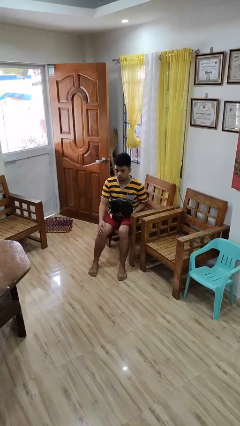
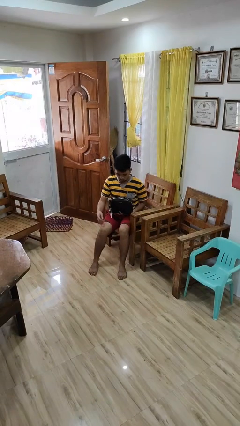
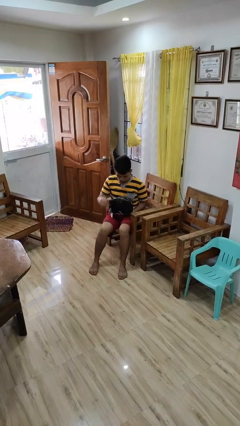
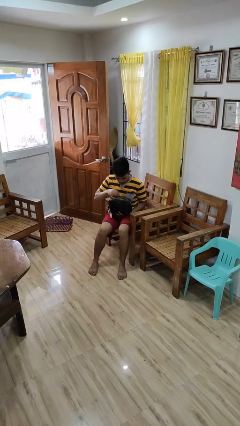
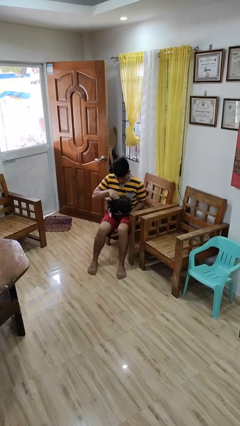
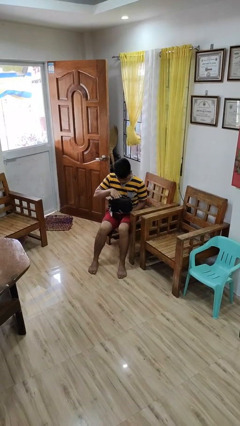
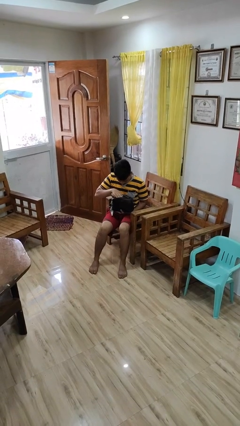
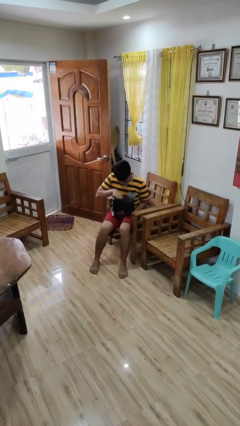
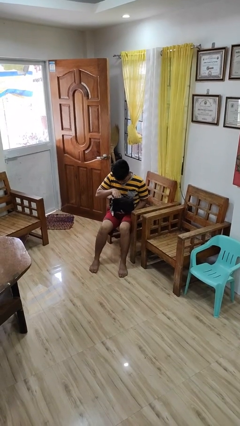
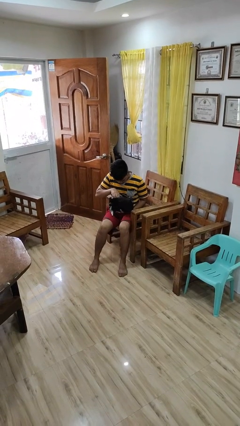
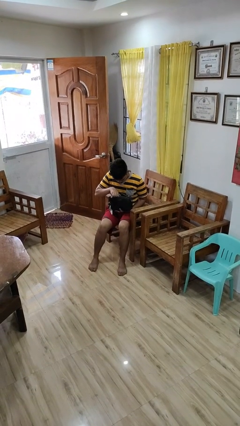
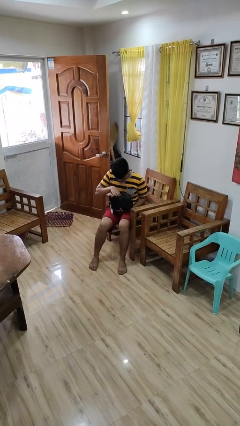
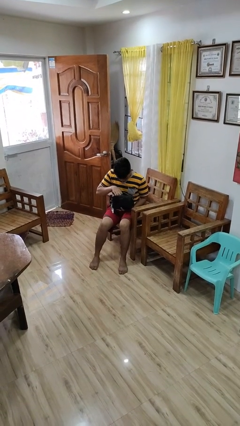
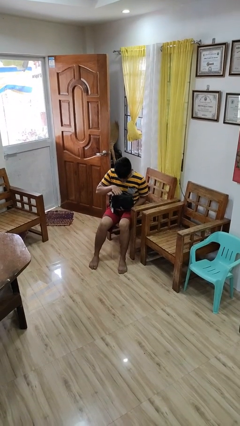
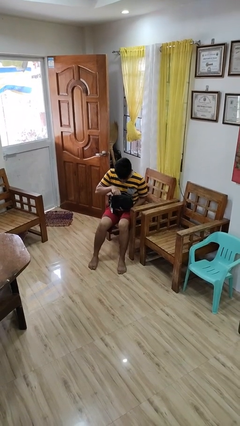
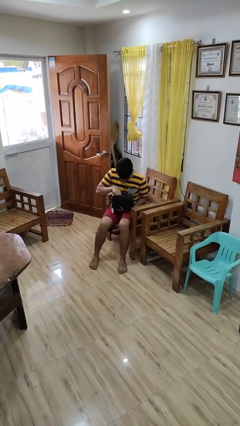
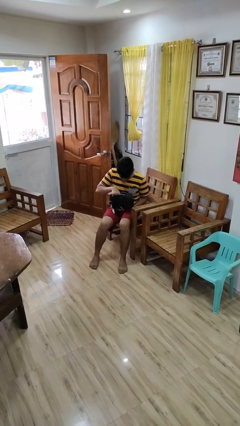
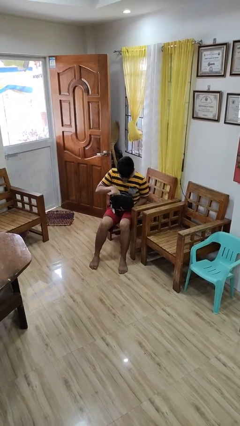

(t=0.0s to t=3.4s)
person searches in purse

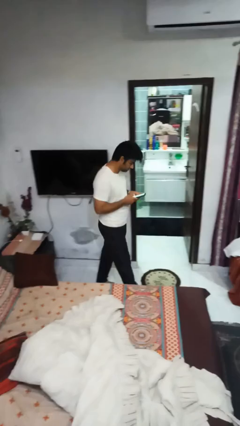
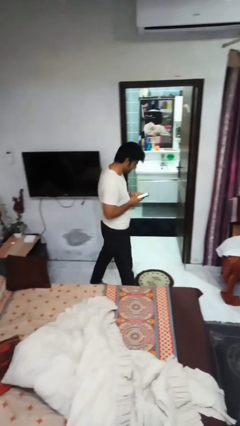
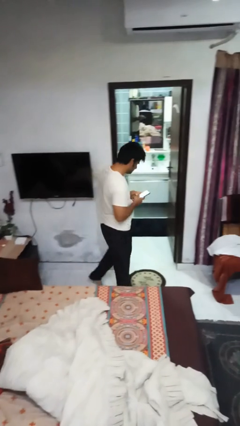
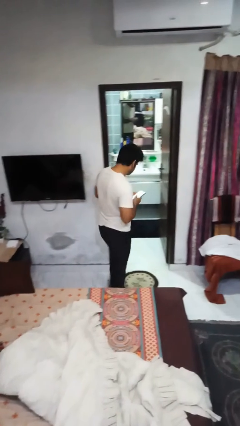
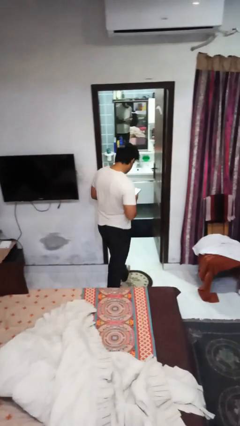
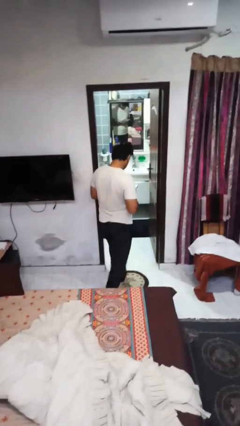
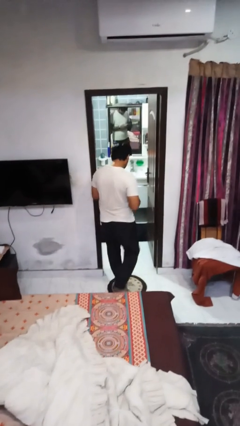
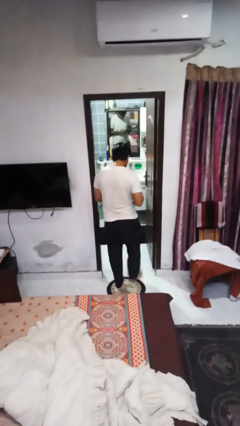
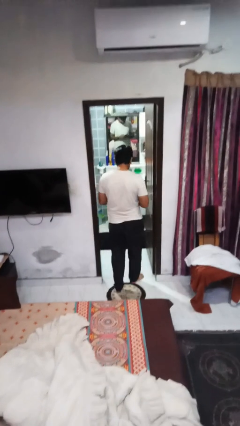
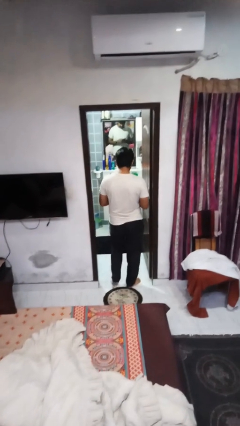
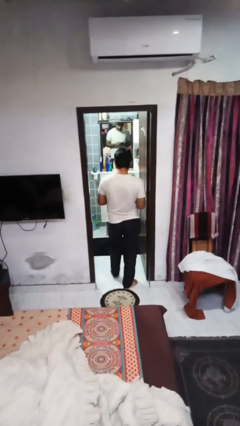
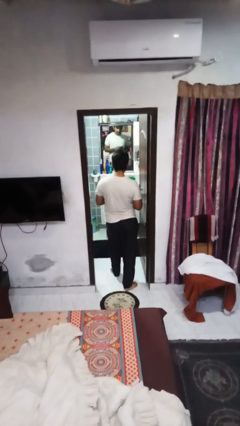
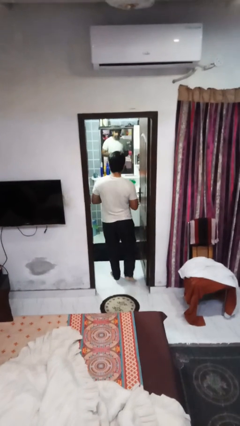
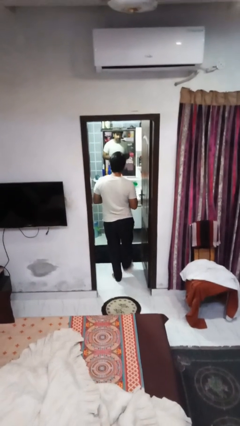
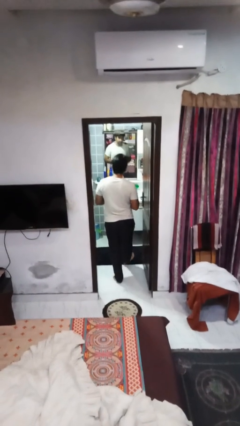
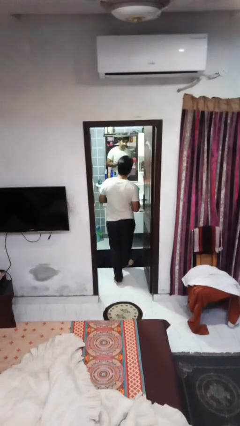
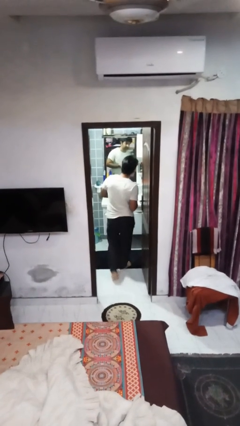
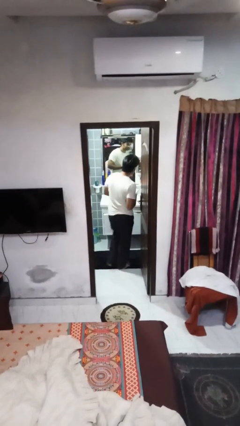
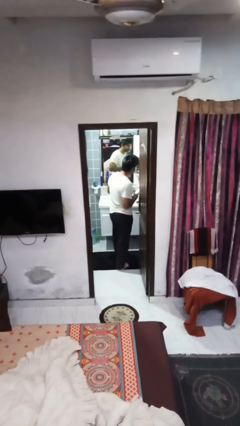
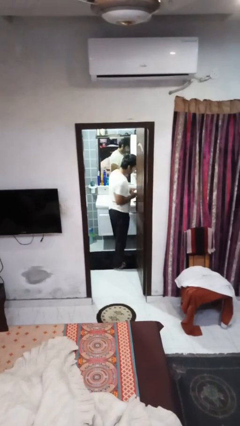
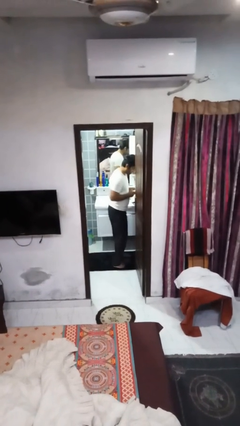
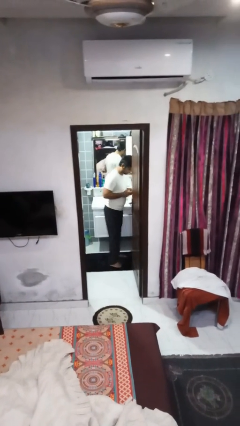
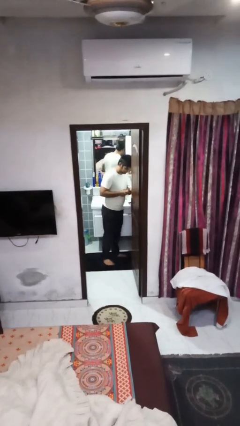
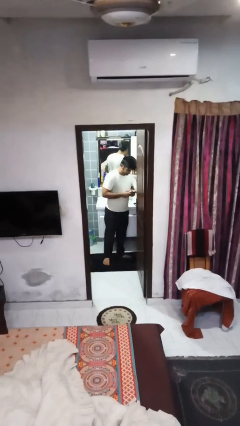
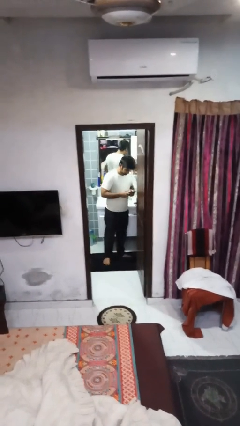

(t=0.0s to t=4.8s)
person exits scene through structure

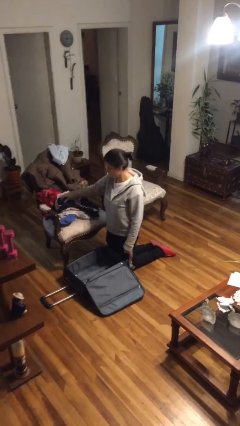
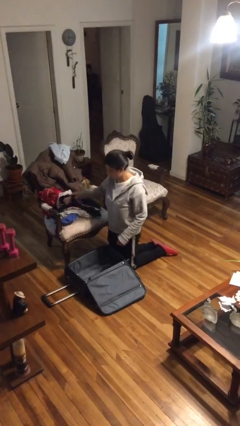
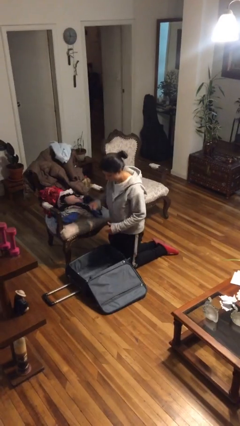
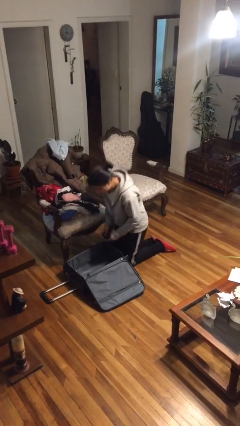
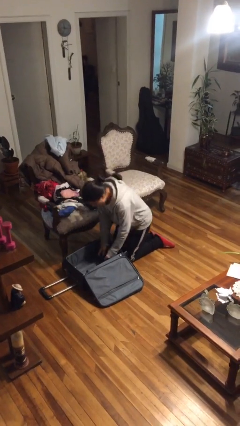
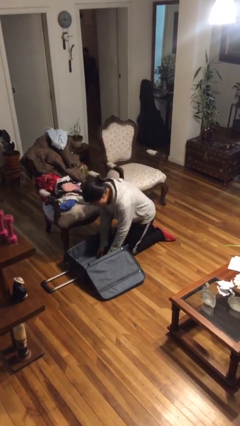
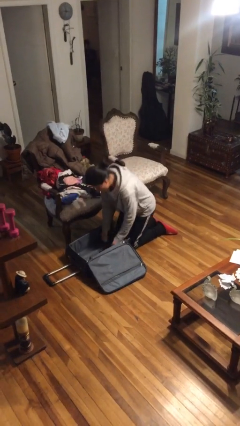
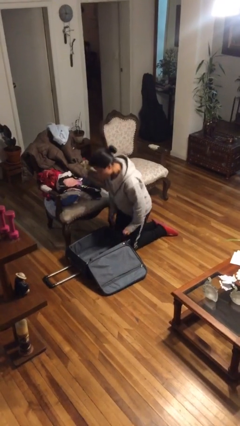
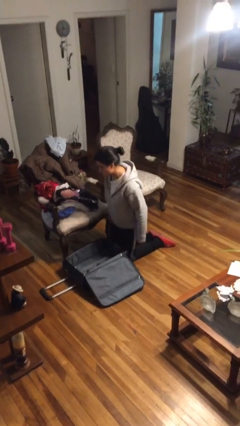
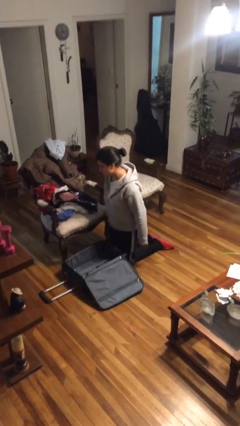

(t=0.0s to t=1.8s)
person loads clothes into suitcase

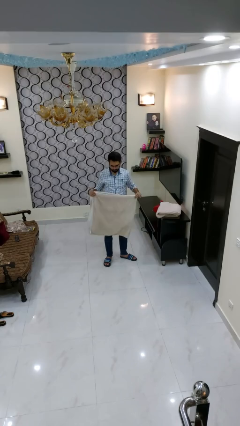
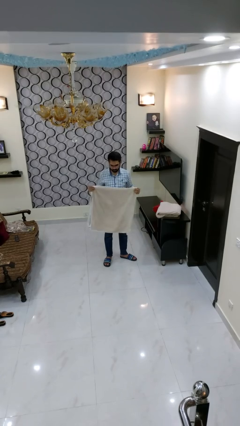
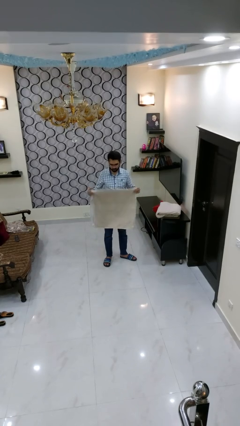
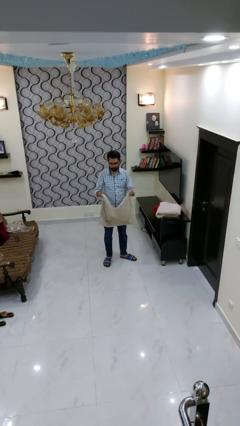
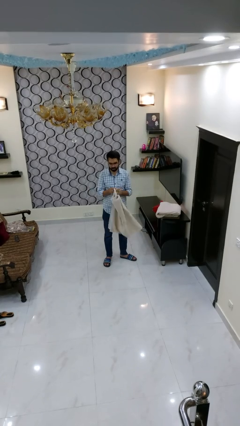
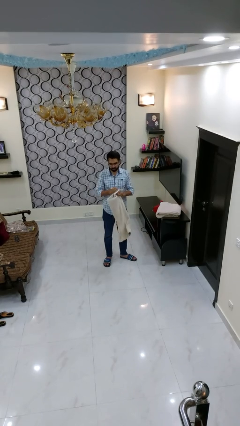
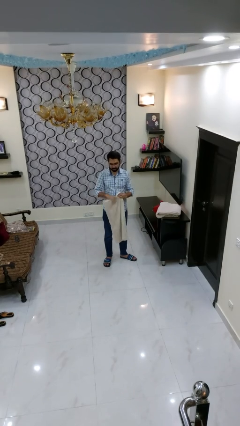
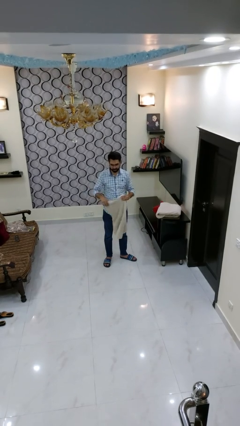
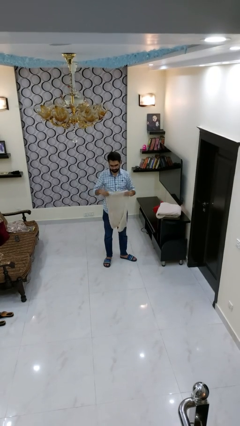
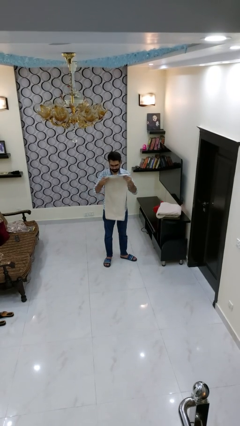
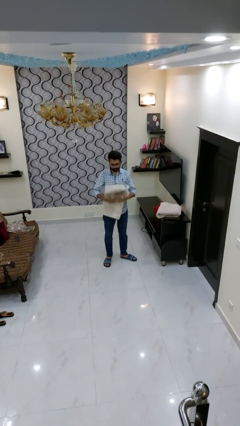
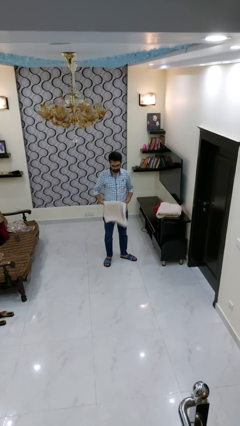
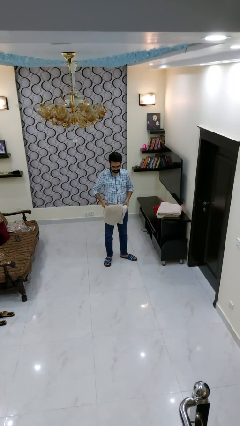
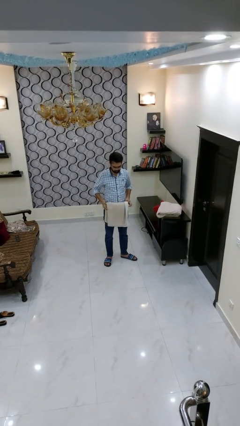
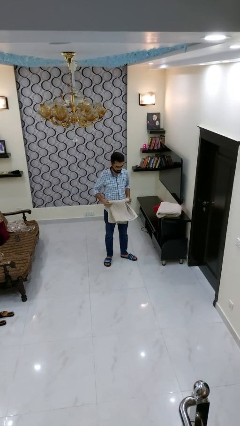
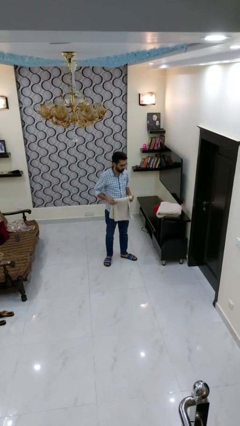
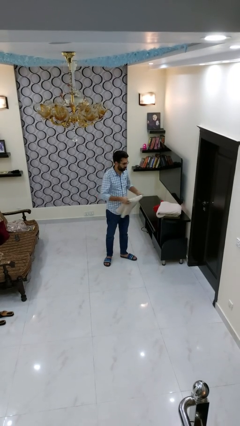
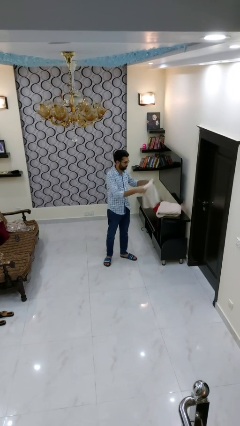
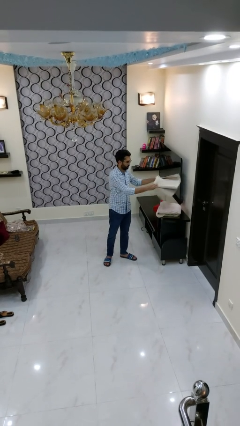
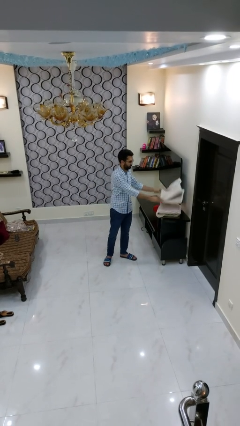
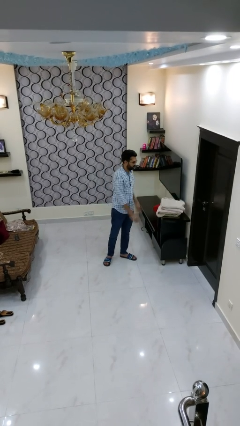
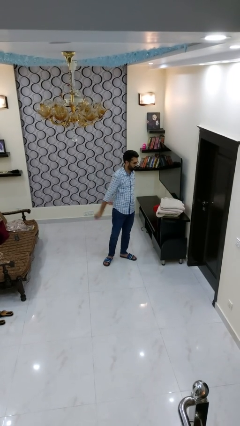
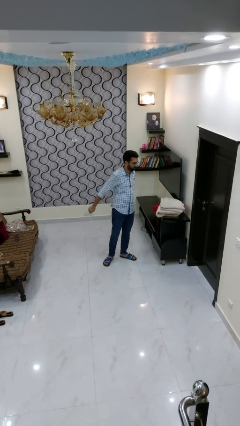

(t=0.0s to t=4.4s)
person folds towel

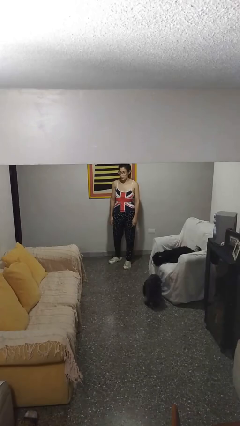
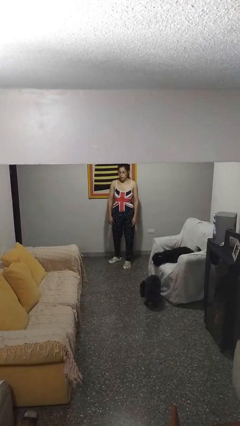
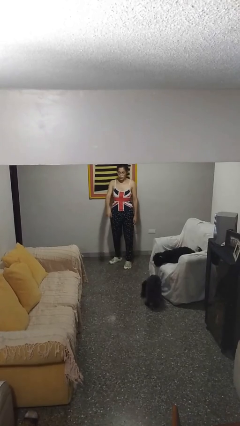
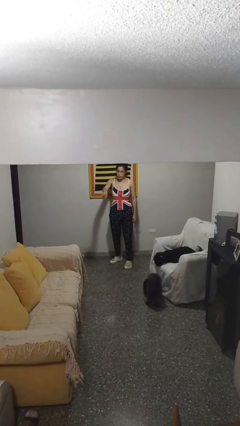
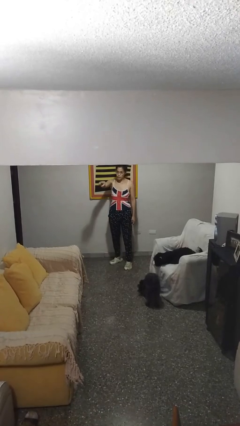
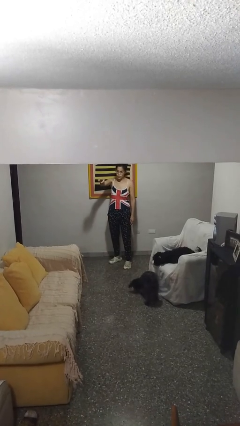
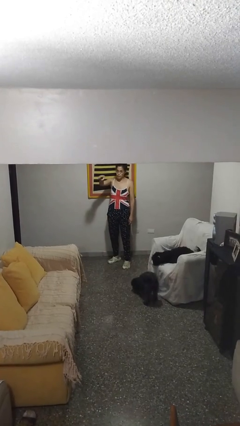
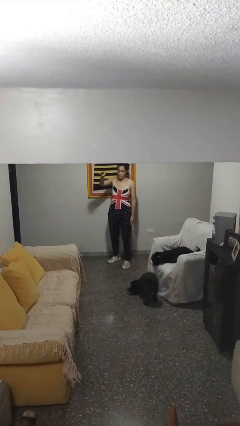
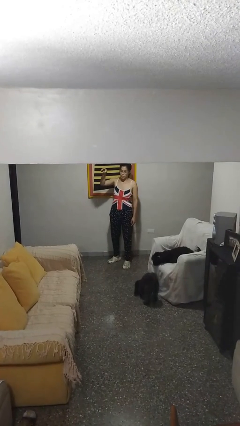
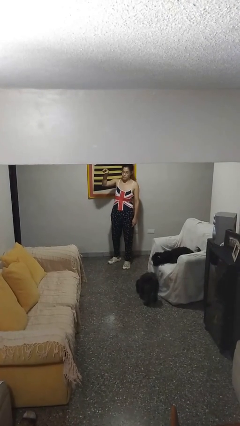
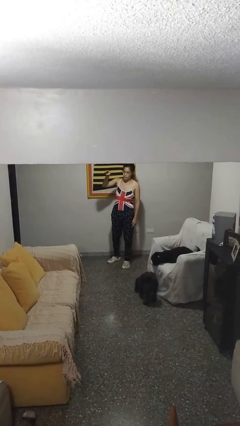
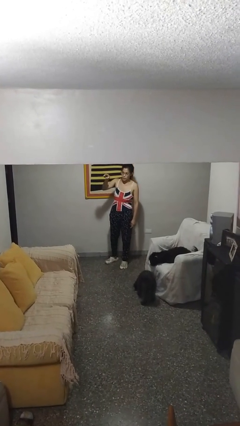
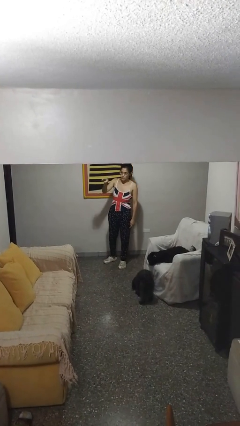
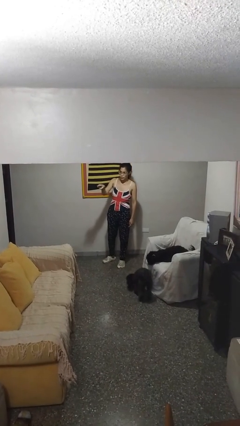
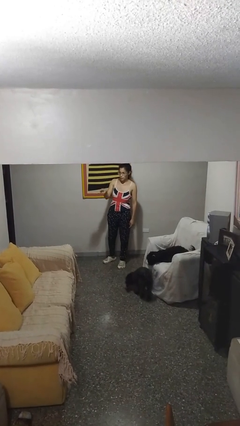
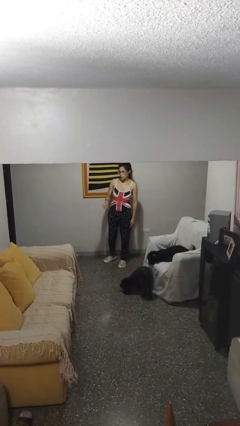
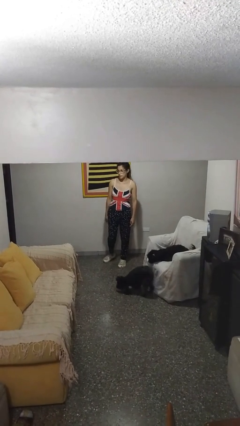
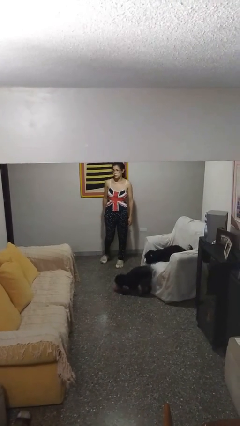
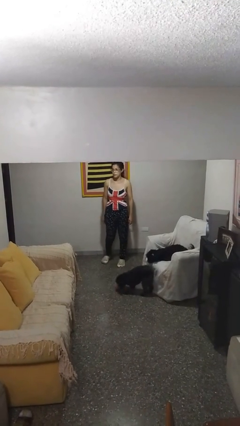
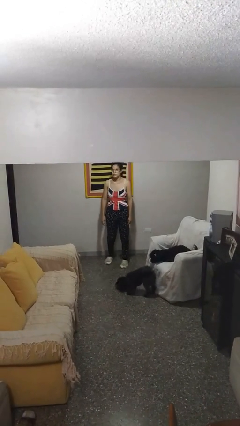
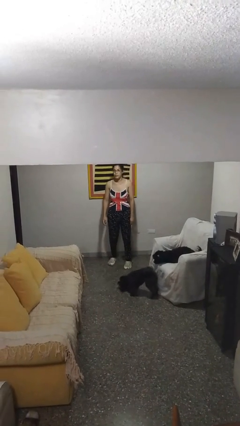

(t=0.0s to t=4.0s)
person points at person
